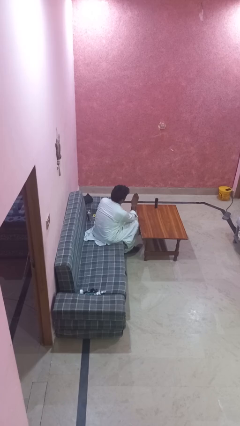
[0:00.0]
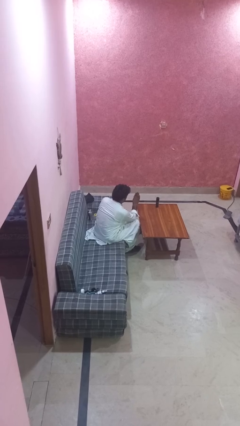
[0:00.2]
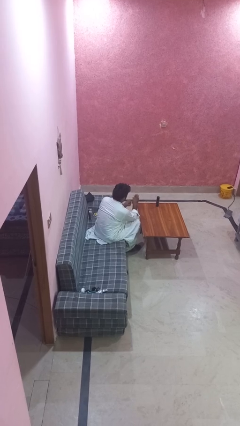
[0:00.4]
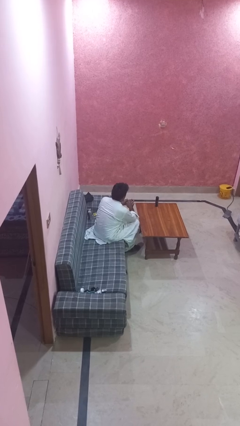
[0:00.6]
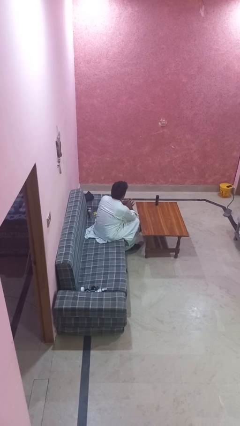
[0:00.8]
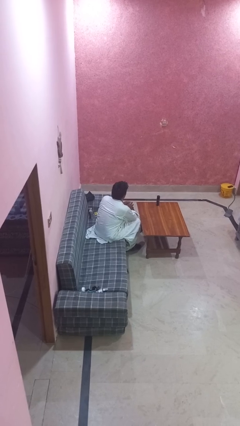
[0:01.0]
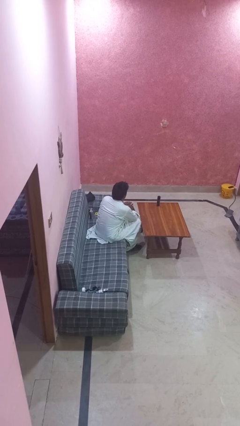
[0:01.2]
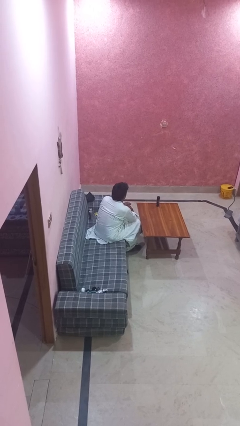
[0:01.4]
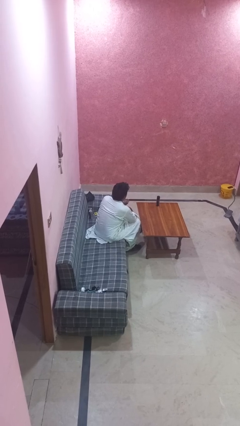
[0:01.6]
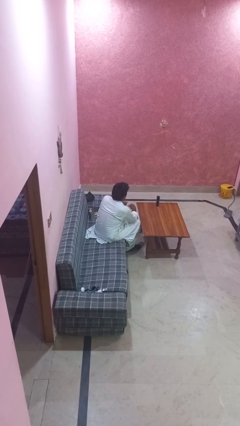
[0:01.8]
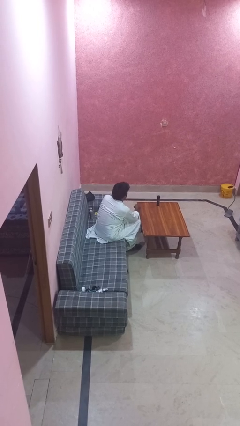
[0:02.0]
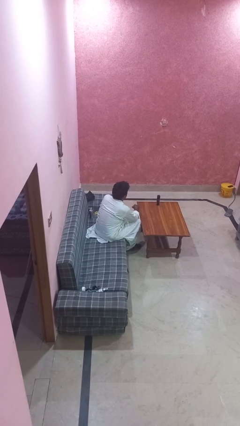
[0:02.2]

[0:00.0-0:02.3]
person takes off ring

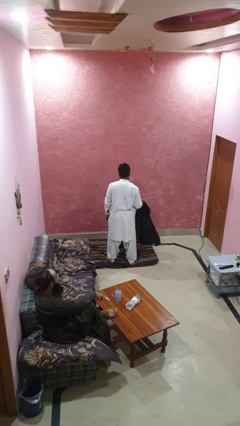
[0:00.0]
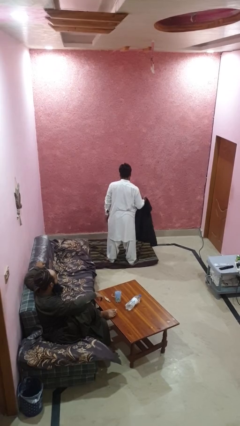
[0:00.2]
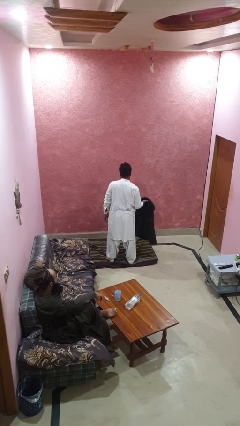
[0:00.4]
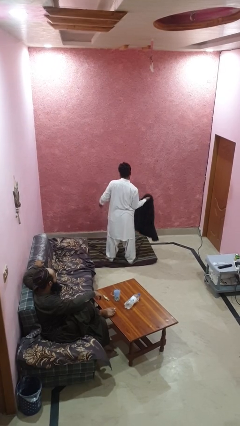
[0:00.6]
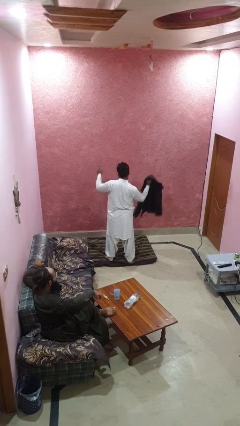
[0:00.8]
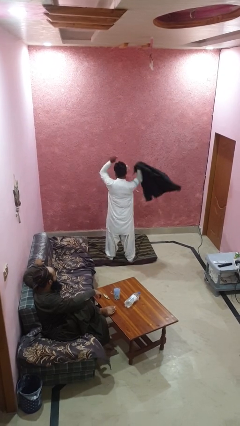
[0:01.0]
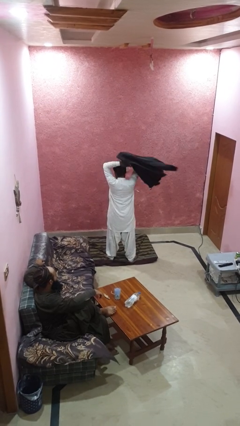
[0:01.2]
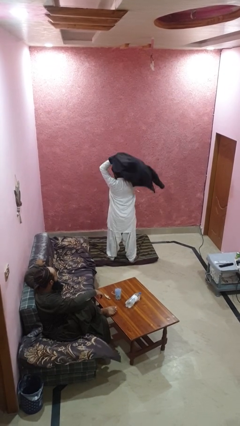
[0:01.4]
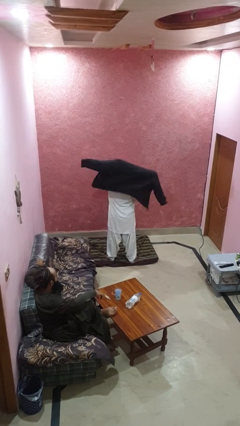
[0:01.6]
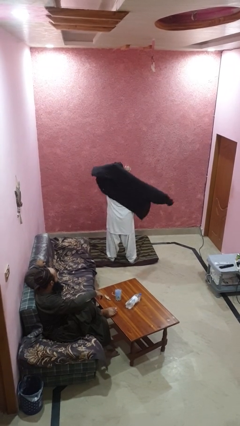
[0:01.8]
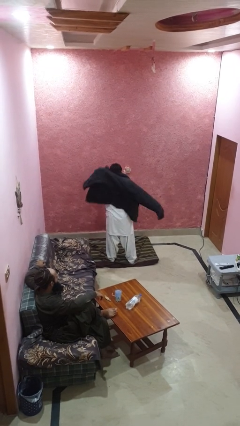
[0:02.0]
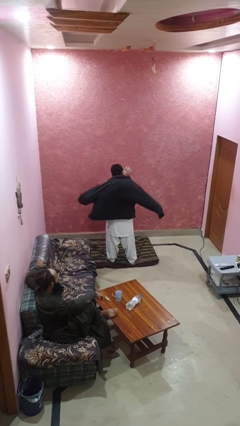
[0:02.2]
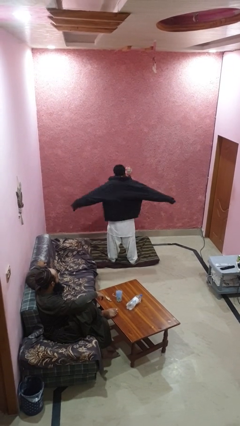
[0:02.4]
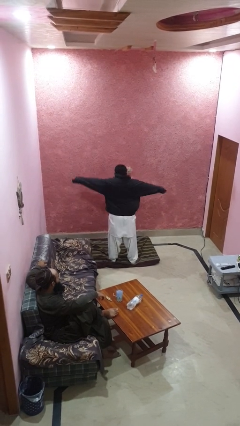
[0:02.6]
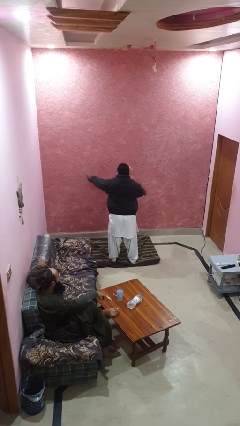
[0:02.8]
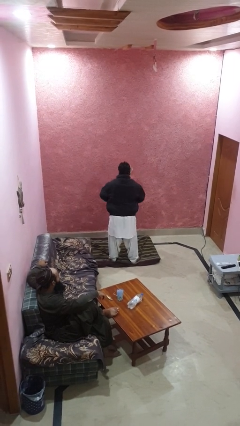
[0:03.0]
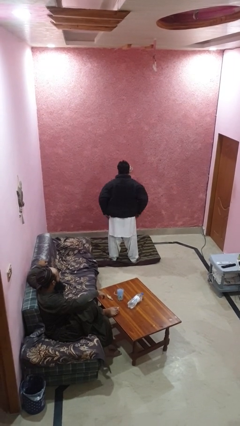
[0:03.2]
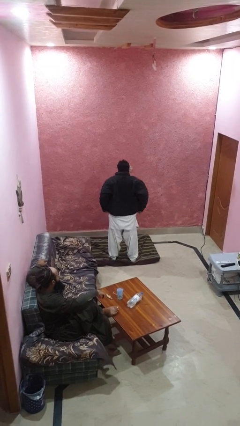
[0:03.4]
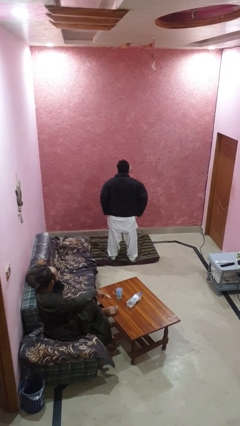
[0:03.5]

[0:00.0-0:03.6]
person puts on jacket

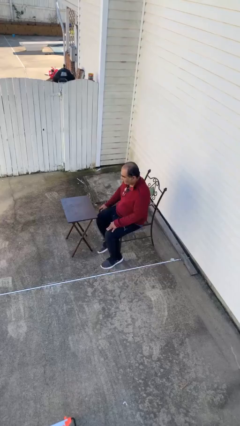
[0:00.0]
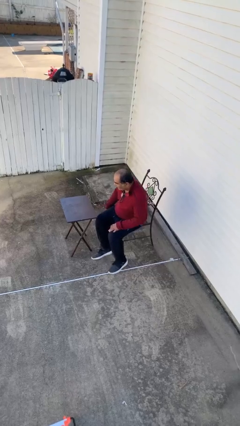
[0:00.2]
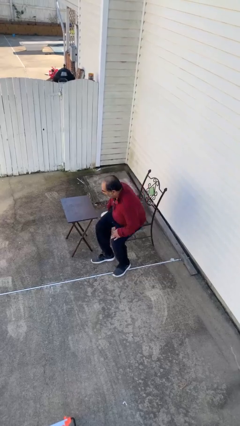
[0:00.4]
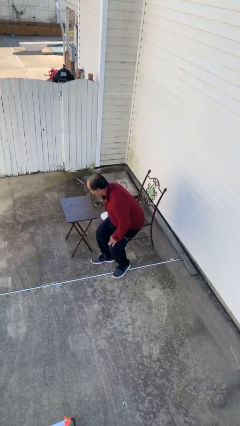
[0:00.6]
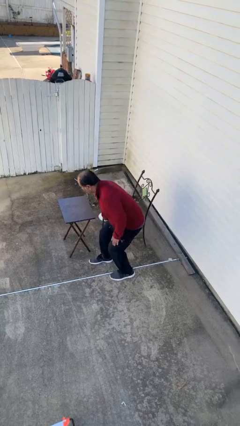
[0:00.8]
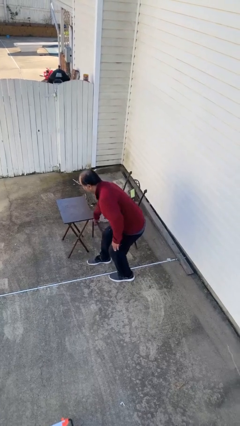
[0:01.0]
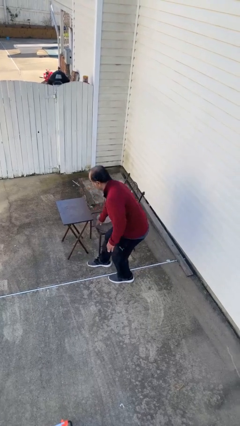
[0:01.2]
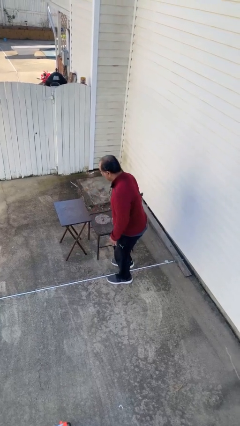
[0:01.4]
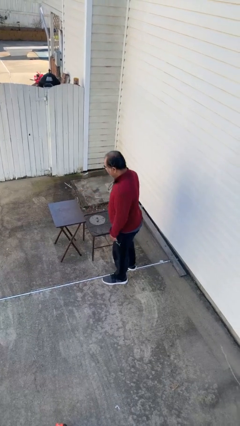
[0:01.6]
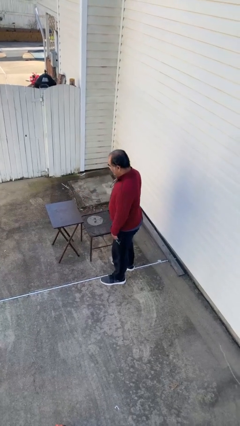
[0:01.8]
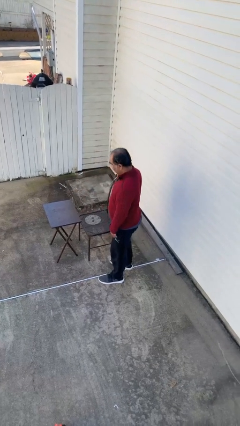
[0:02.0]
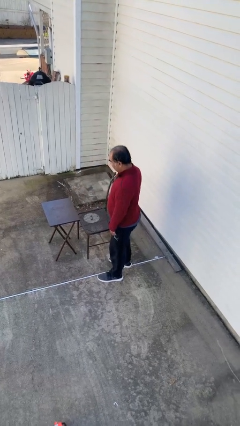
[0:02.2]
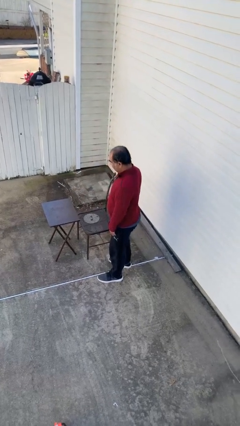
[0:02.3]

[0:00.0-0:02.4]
person stands up

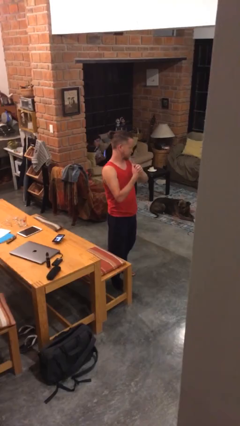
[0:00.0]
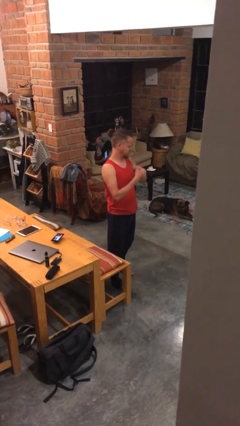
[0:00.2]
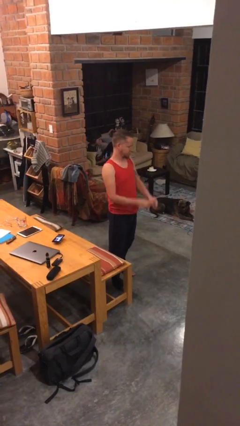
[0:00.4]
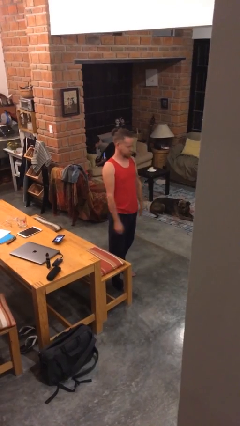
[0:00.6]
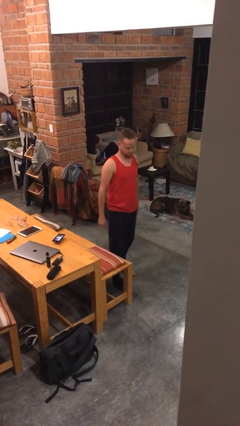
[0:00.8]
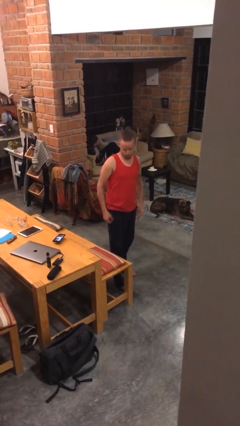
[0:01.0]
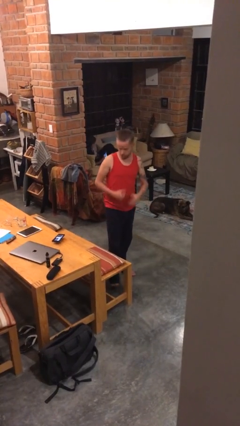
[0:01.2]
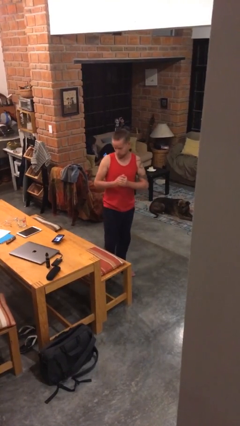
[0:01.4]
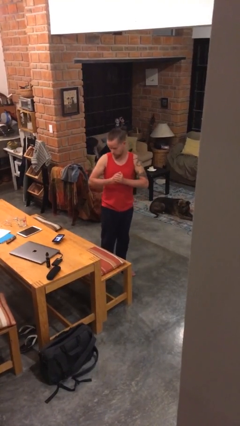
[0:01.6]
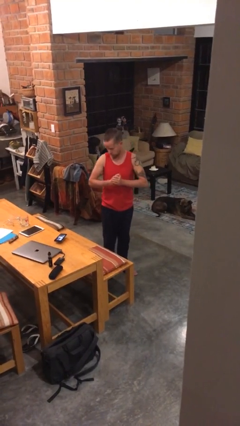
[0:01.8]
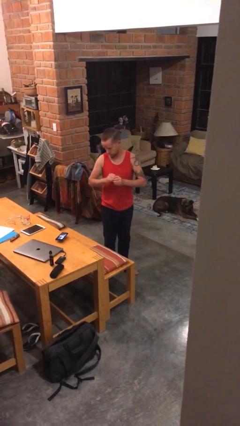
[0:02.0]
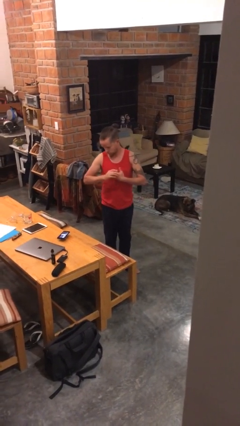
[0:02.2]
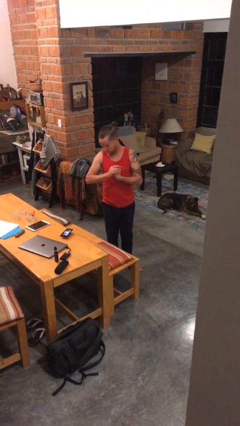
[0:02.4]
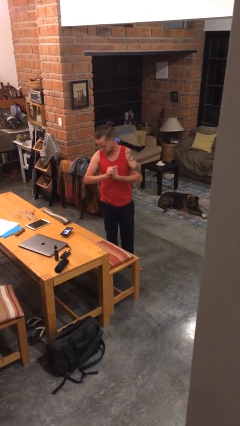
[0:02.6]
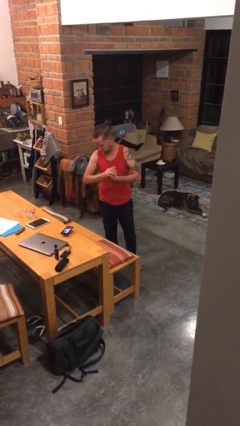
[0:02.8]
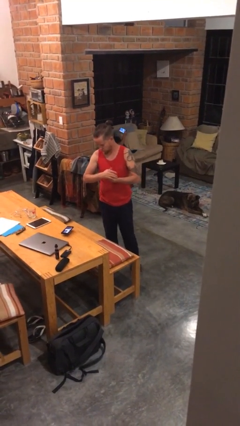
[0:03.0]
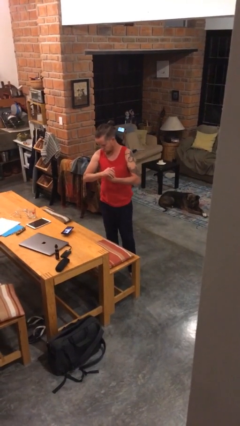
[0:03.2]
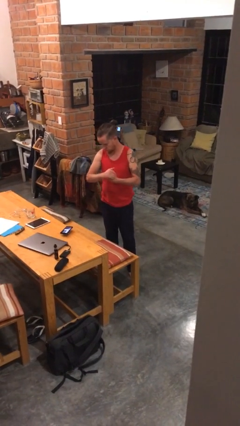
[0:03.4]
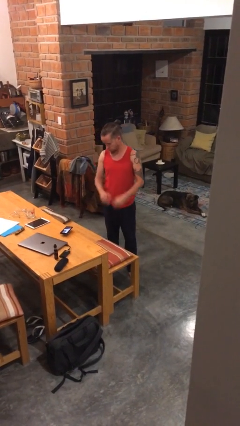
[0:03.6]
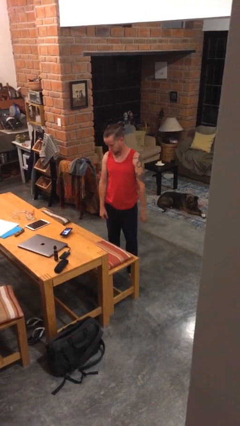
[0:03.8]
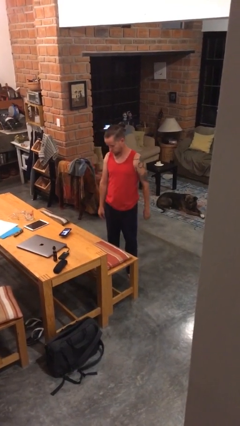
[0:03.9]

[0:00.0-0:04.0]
person cracks knuckles

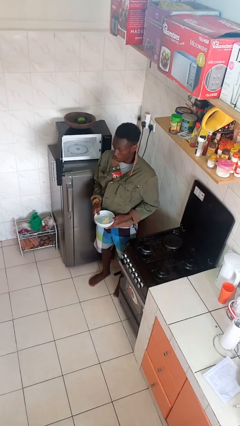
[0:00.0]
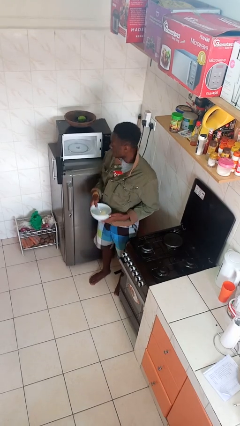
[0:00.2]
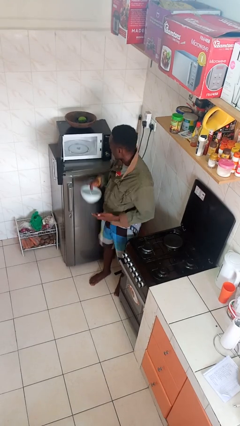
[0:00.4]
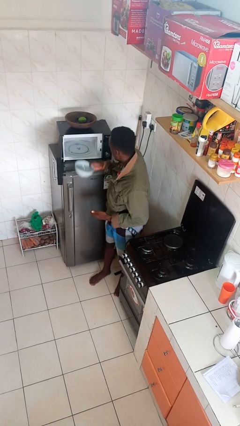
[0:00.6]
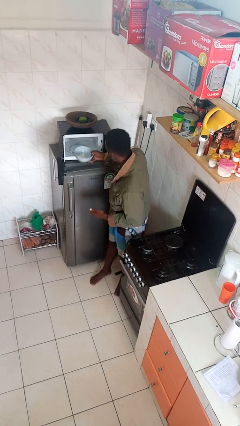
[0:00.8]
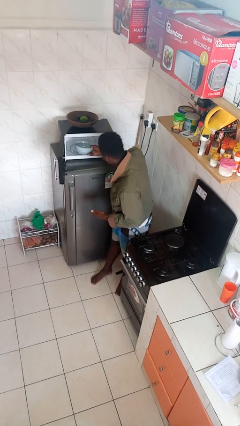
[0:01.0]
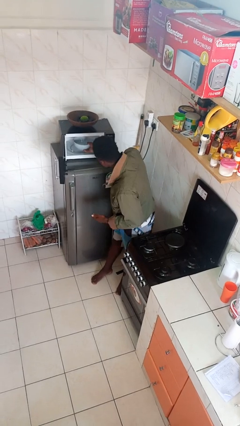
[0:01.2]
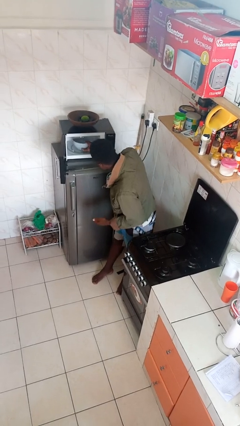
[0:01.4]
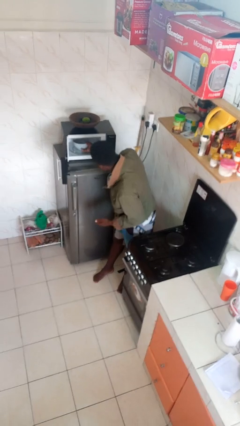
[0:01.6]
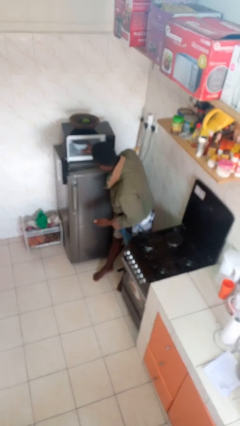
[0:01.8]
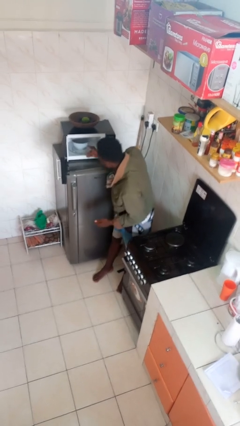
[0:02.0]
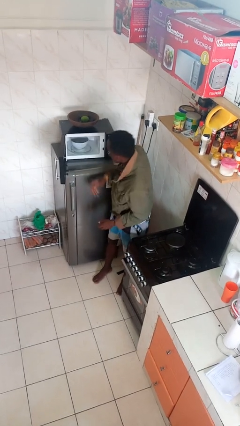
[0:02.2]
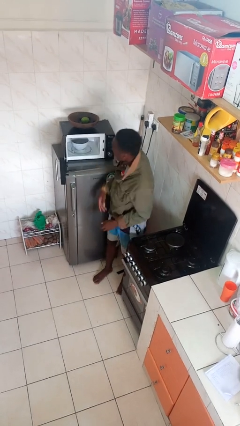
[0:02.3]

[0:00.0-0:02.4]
person puts object into microwave

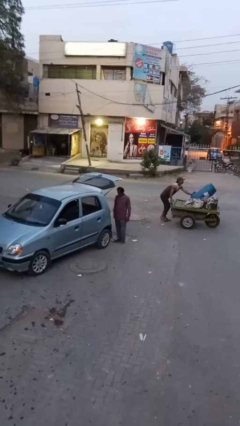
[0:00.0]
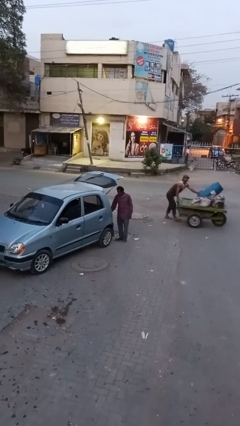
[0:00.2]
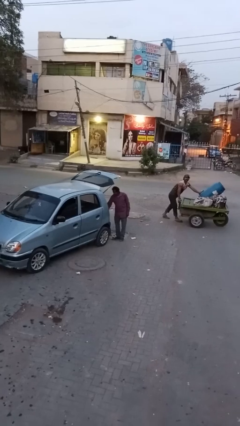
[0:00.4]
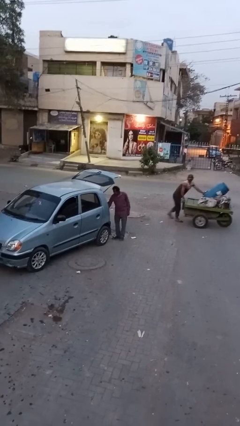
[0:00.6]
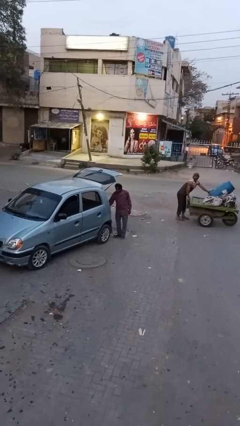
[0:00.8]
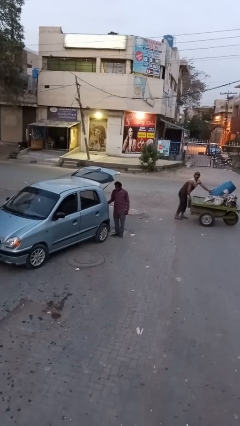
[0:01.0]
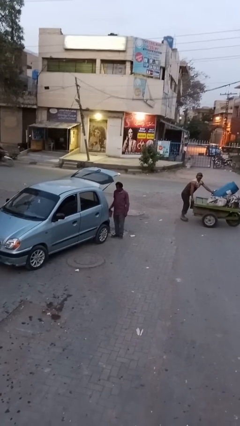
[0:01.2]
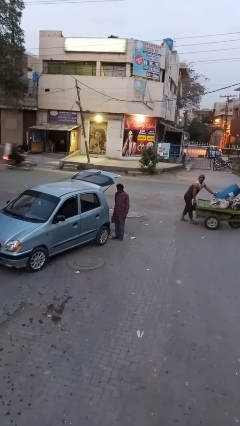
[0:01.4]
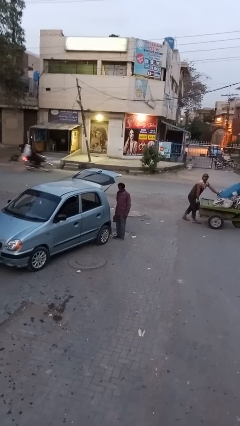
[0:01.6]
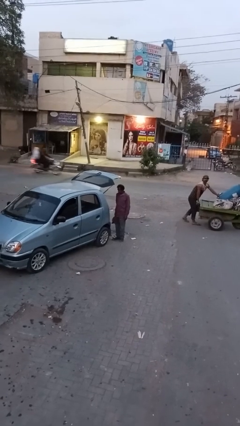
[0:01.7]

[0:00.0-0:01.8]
person unloads car

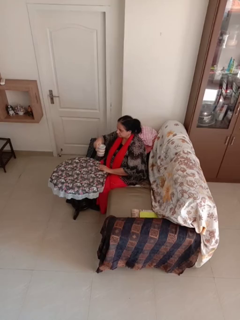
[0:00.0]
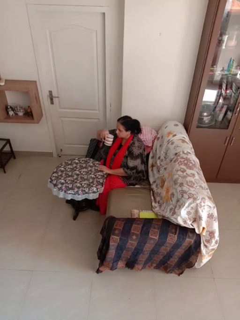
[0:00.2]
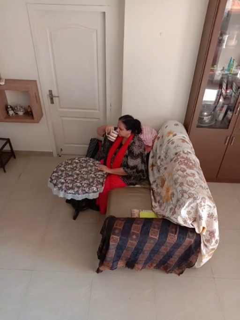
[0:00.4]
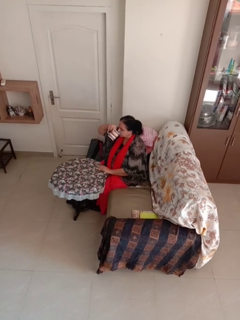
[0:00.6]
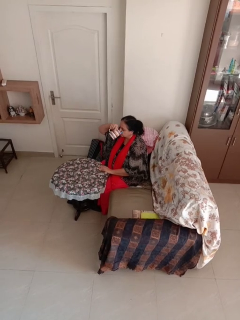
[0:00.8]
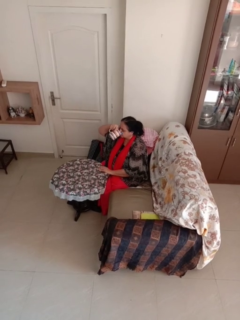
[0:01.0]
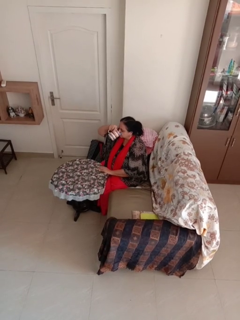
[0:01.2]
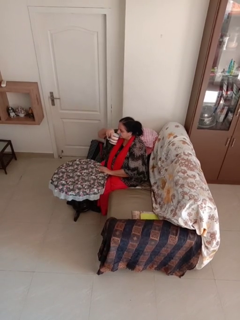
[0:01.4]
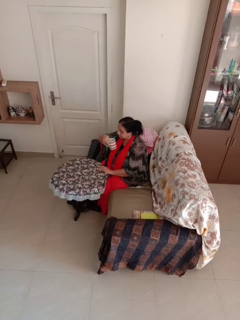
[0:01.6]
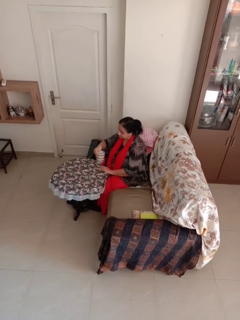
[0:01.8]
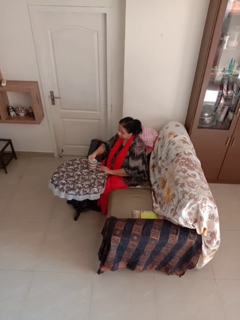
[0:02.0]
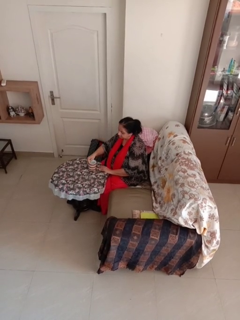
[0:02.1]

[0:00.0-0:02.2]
person drinks from mug
